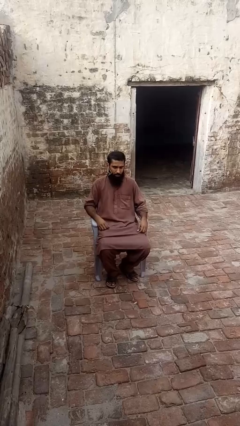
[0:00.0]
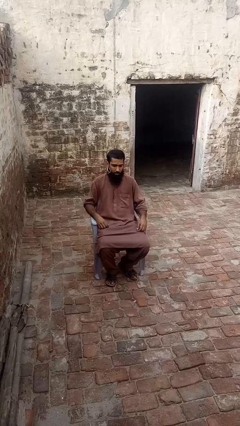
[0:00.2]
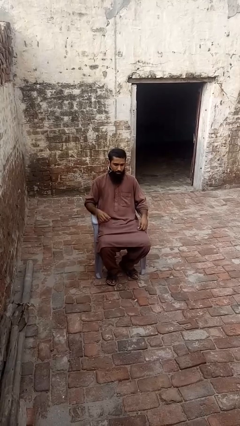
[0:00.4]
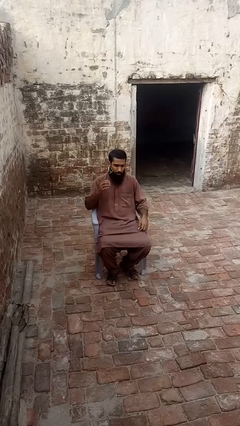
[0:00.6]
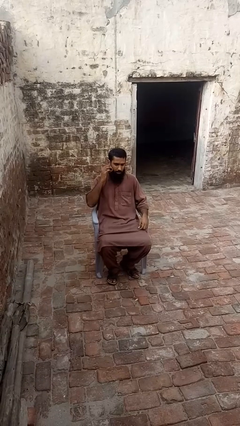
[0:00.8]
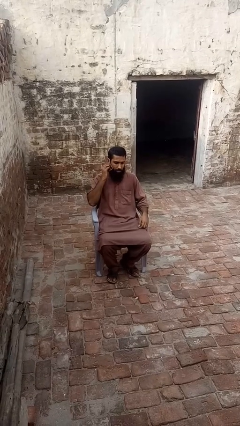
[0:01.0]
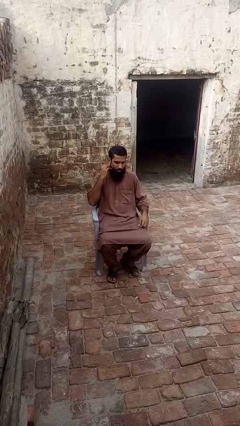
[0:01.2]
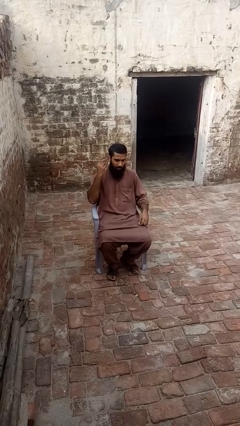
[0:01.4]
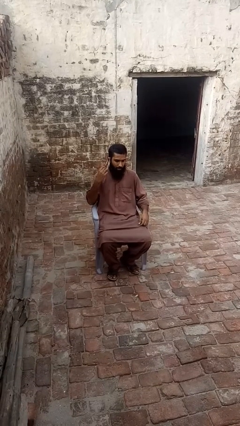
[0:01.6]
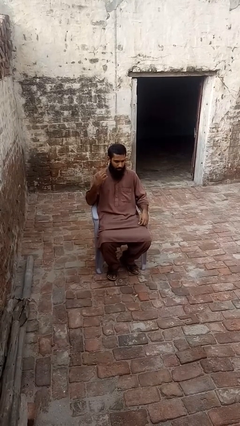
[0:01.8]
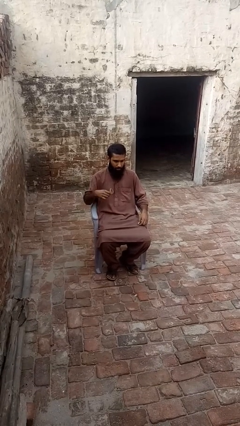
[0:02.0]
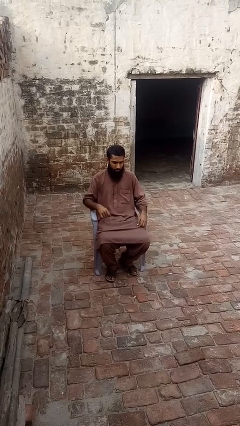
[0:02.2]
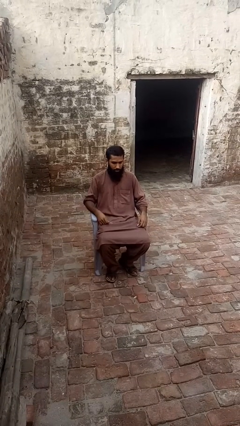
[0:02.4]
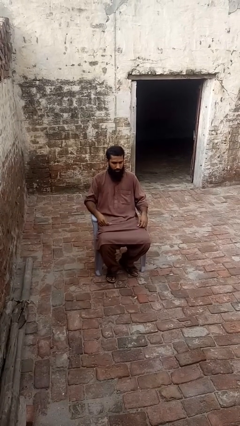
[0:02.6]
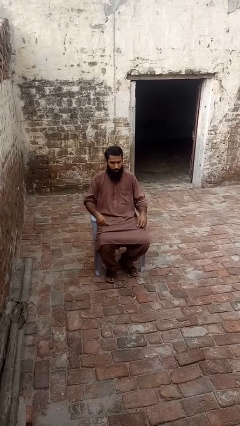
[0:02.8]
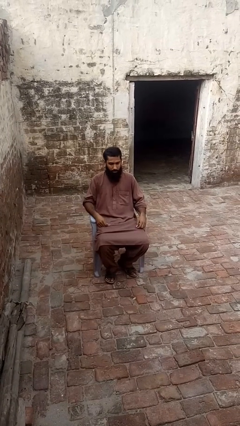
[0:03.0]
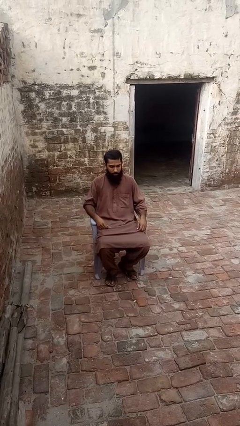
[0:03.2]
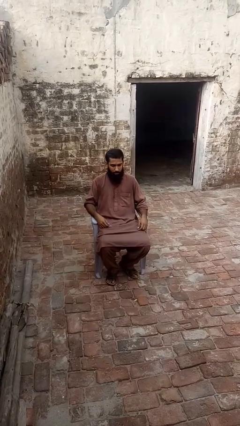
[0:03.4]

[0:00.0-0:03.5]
person takes off earrings

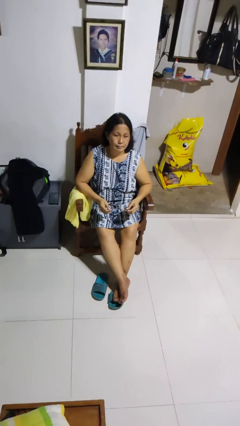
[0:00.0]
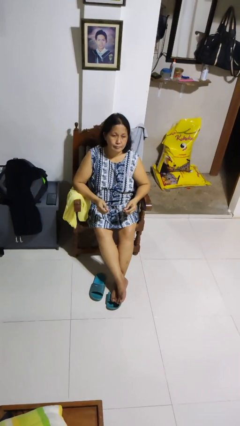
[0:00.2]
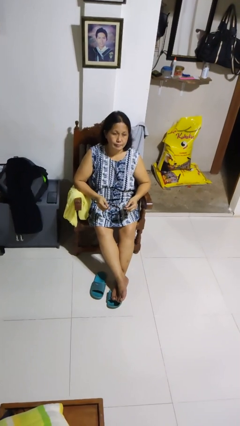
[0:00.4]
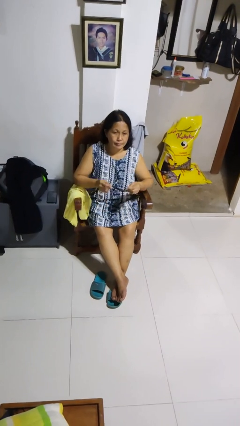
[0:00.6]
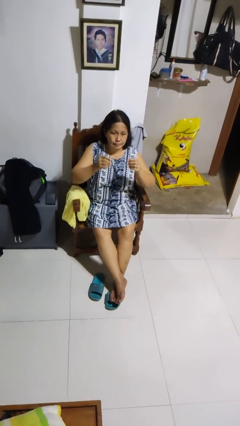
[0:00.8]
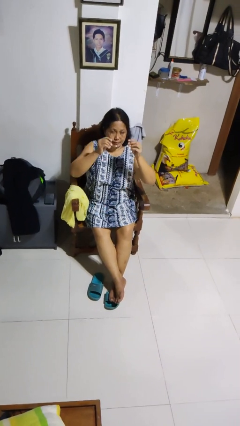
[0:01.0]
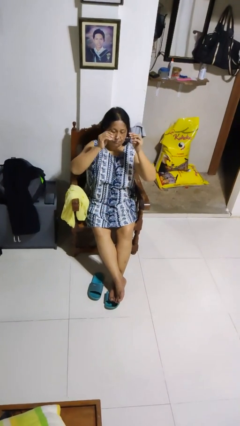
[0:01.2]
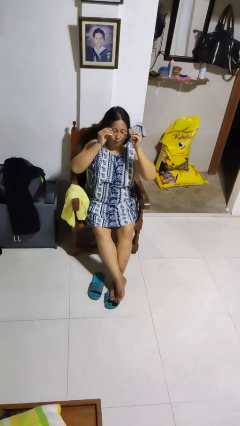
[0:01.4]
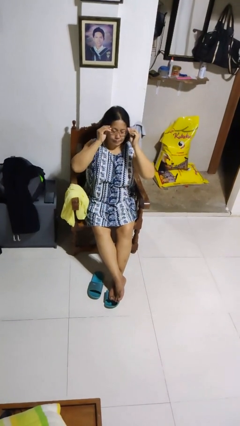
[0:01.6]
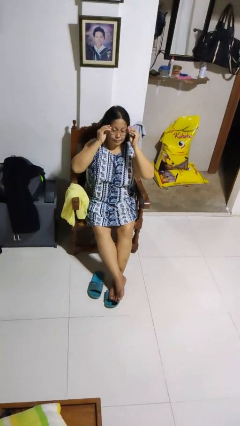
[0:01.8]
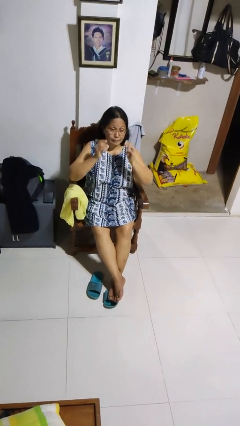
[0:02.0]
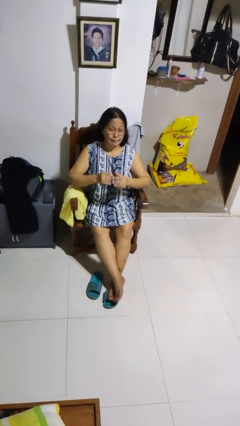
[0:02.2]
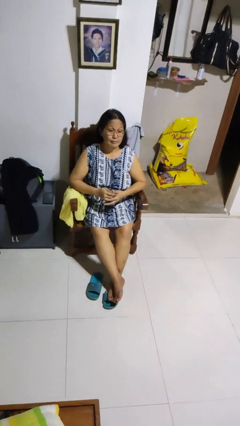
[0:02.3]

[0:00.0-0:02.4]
person puts on glasses

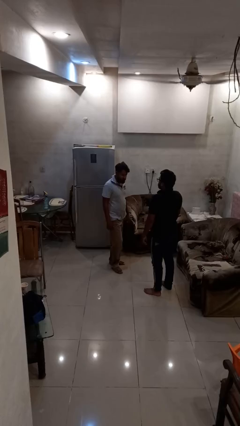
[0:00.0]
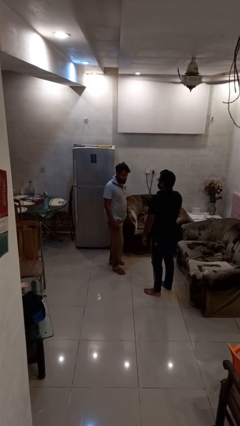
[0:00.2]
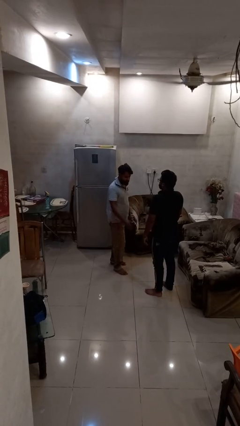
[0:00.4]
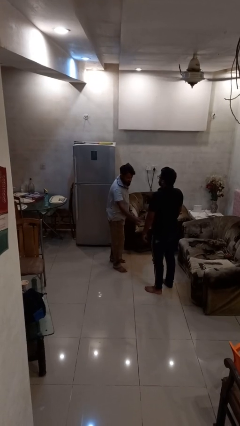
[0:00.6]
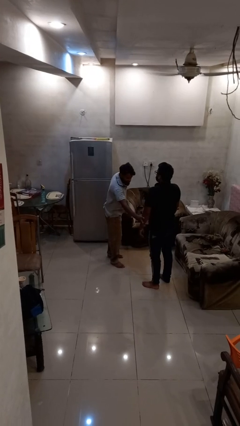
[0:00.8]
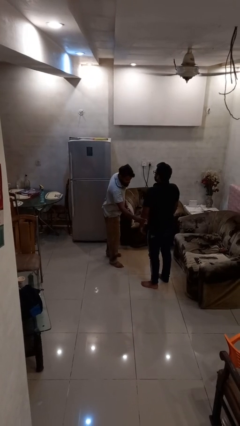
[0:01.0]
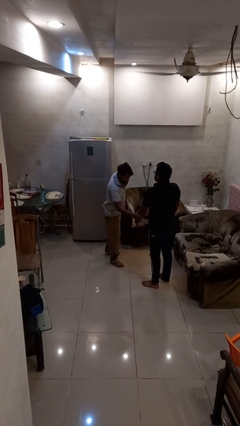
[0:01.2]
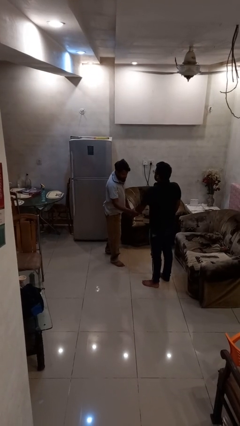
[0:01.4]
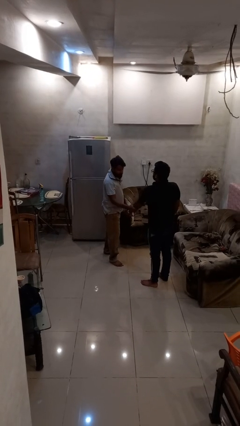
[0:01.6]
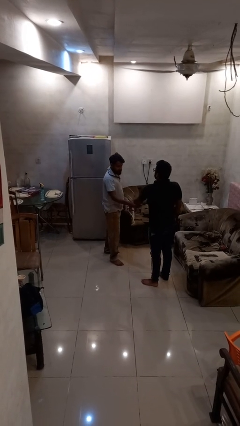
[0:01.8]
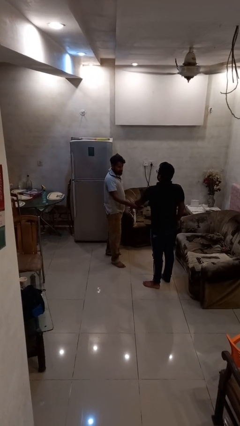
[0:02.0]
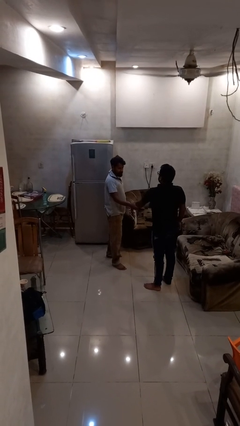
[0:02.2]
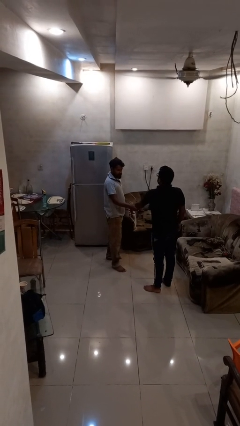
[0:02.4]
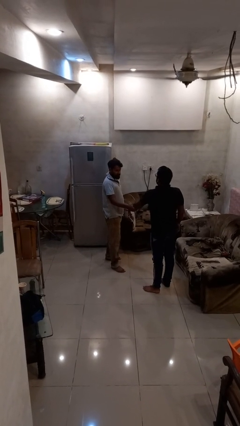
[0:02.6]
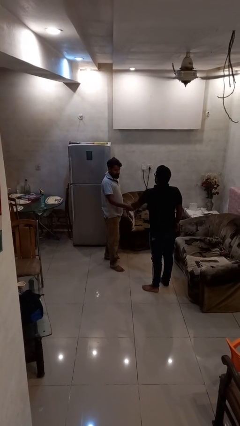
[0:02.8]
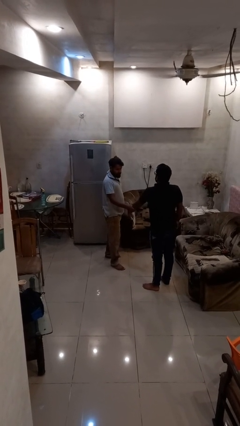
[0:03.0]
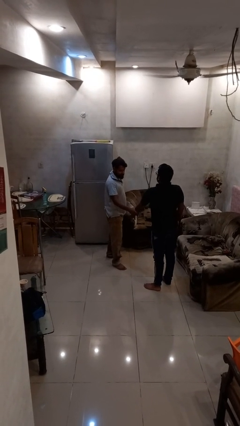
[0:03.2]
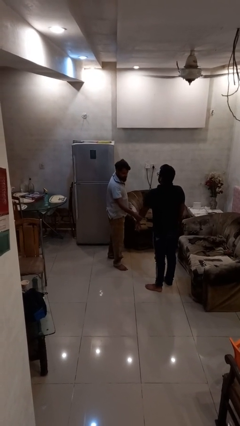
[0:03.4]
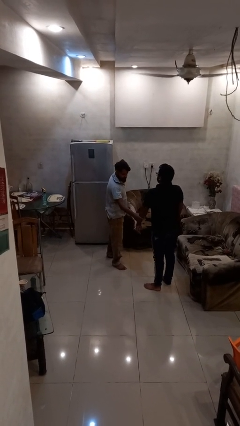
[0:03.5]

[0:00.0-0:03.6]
person grabs person by forearm

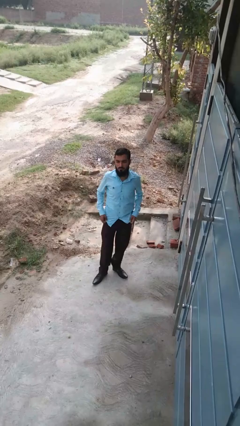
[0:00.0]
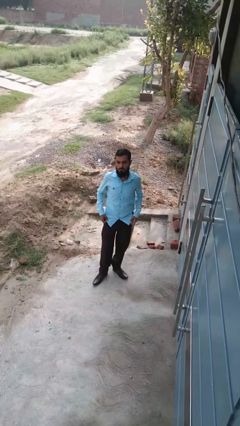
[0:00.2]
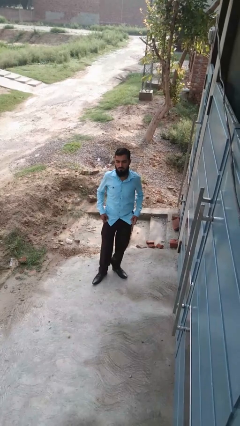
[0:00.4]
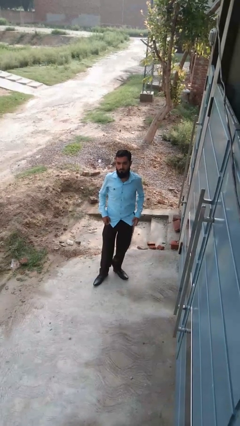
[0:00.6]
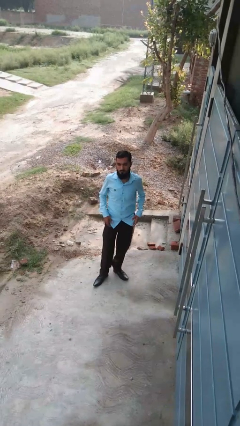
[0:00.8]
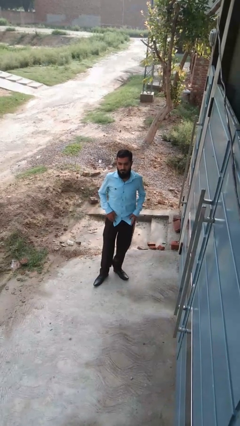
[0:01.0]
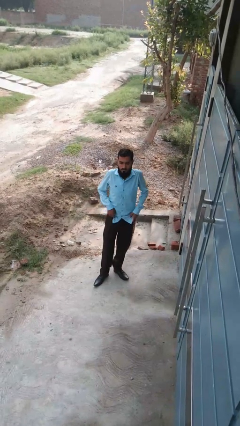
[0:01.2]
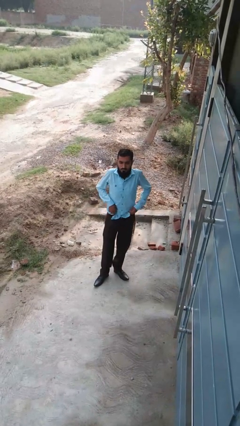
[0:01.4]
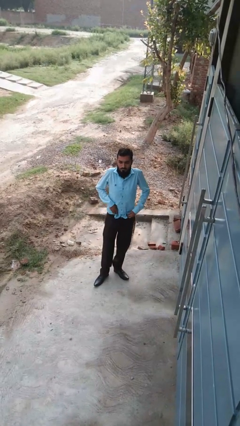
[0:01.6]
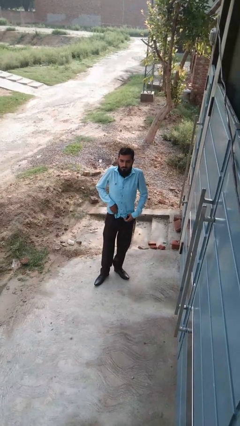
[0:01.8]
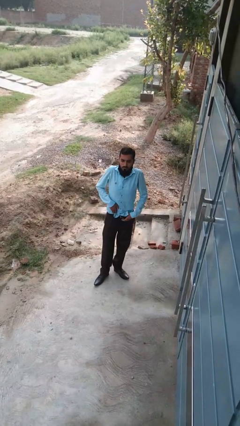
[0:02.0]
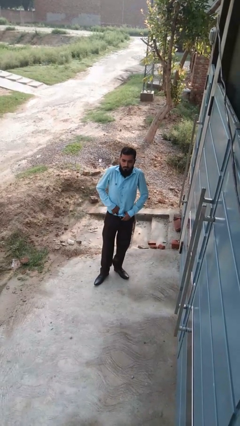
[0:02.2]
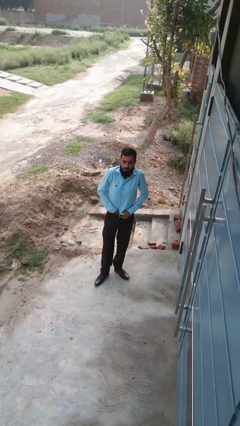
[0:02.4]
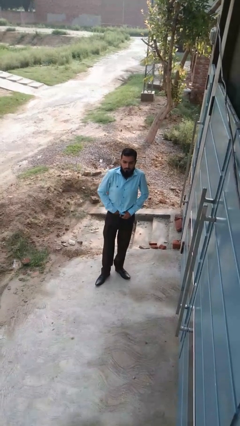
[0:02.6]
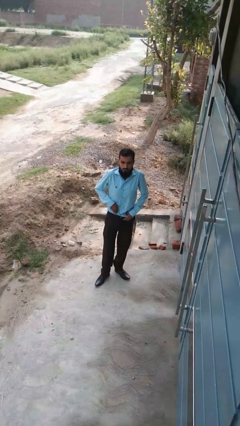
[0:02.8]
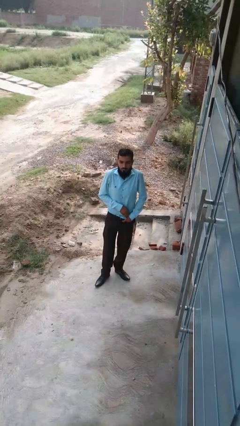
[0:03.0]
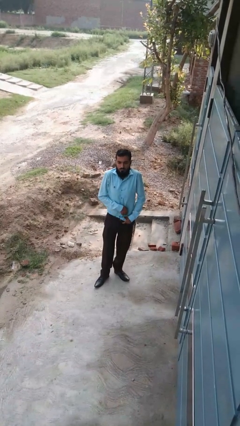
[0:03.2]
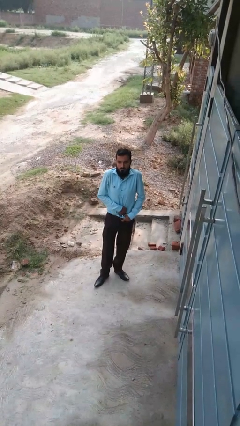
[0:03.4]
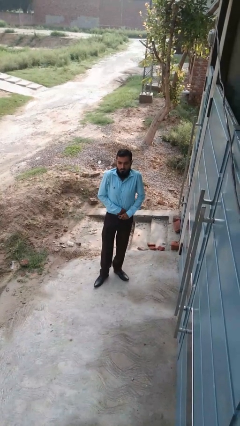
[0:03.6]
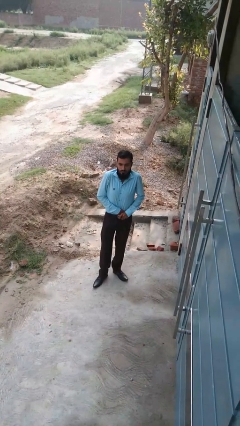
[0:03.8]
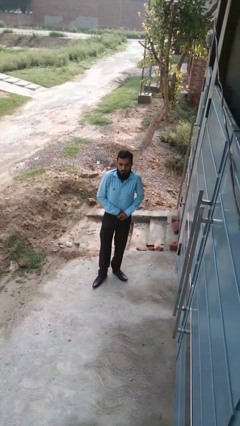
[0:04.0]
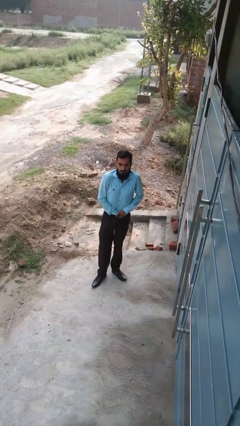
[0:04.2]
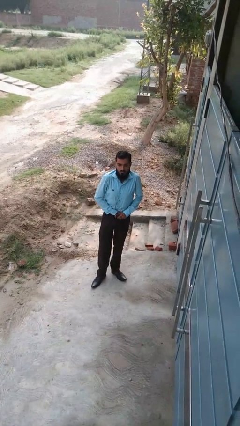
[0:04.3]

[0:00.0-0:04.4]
person tucks in shirt

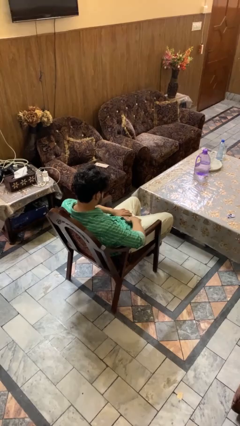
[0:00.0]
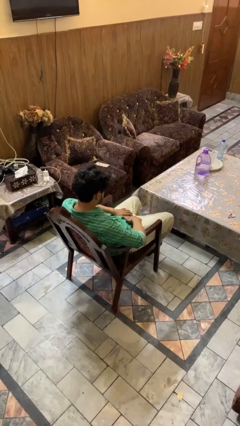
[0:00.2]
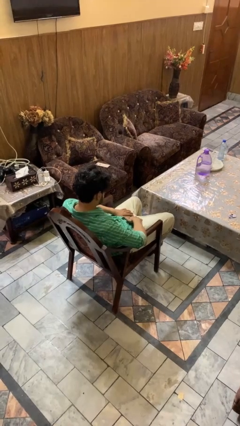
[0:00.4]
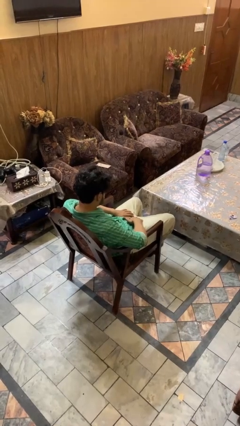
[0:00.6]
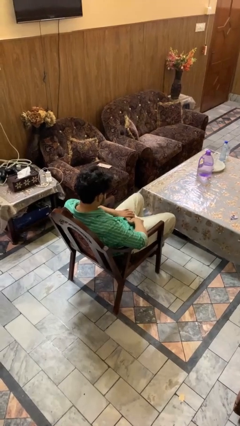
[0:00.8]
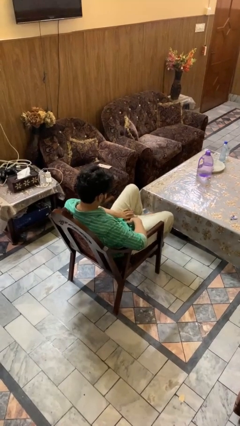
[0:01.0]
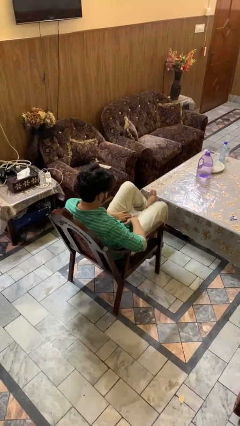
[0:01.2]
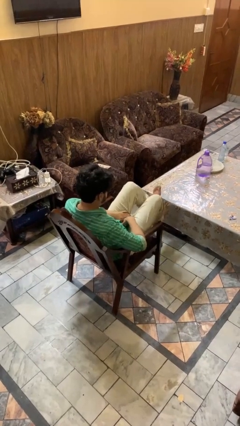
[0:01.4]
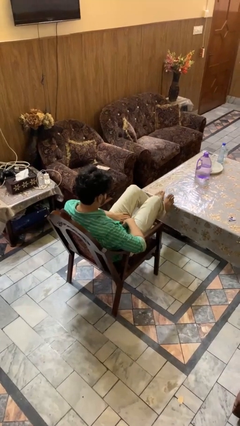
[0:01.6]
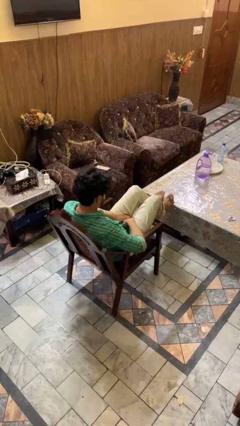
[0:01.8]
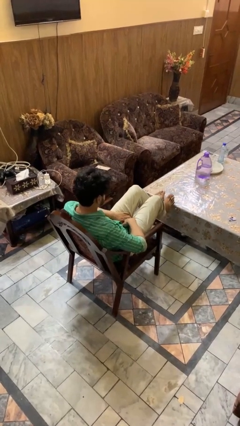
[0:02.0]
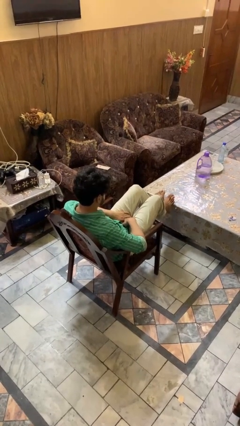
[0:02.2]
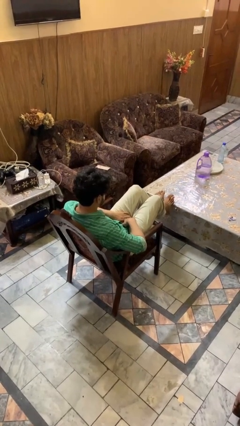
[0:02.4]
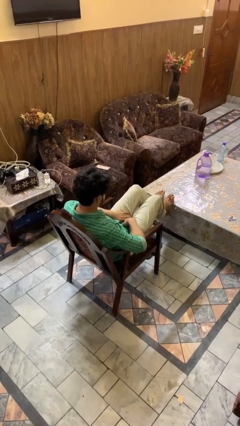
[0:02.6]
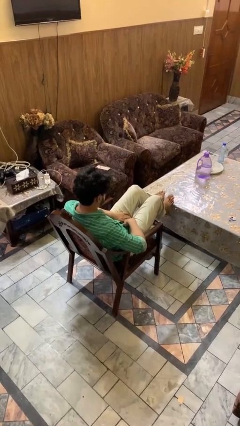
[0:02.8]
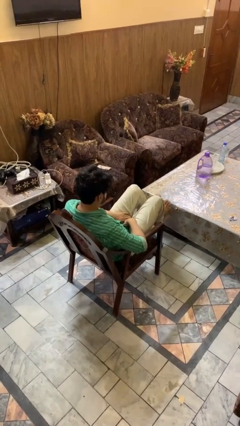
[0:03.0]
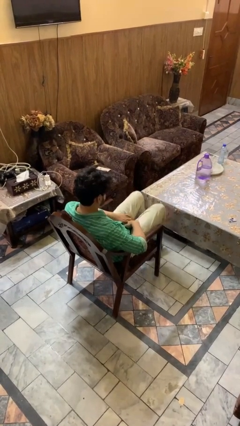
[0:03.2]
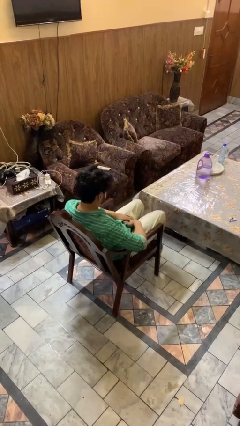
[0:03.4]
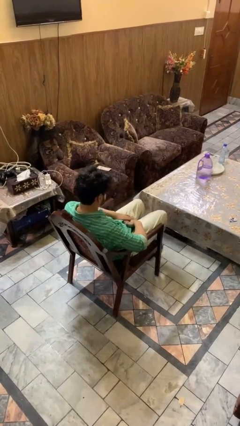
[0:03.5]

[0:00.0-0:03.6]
person puts feet up

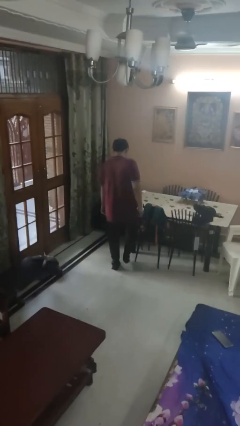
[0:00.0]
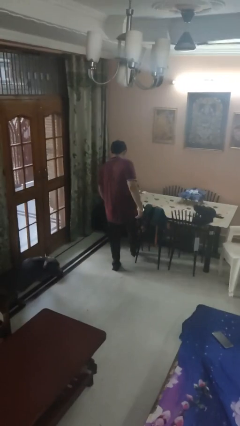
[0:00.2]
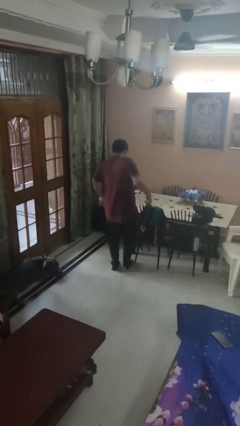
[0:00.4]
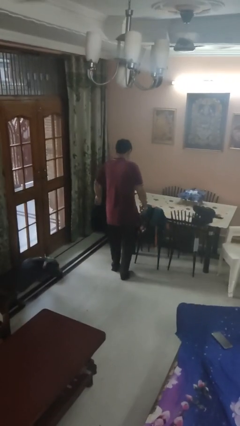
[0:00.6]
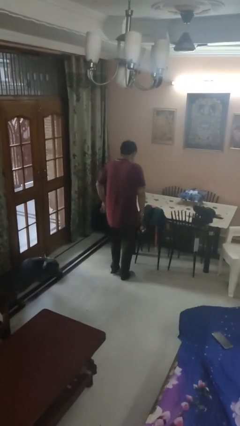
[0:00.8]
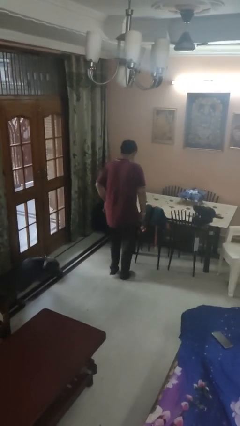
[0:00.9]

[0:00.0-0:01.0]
person stubs toe
